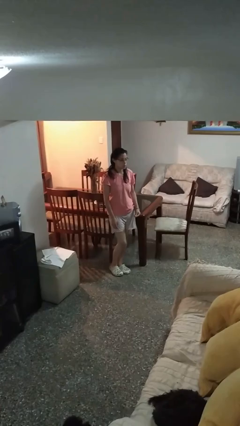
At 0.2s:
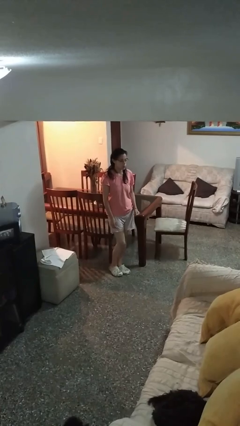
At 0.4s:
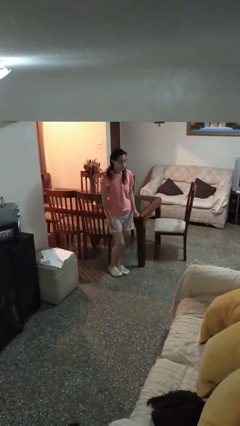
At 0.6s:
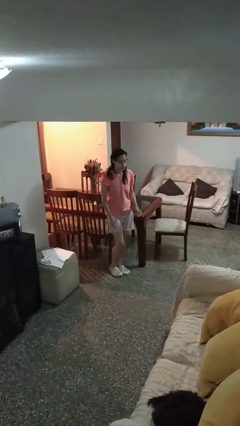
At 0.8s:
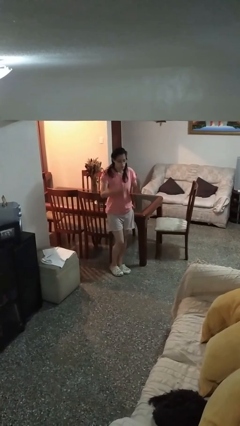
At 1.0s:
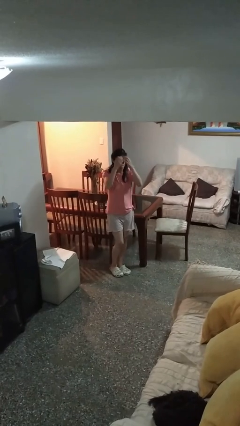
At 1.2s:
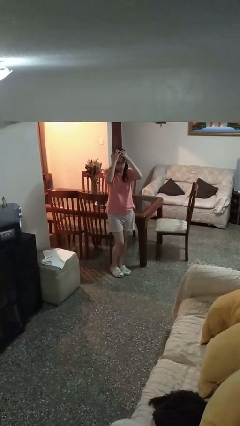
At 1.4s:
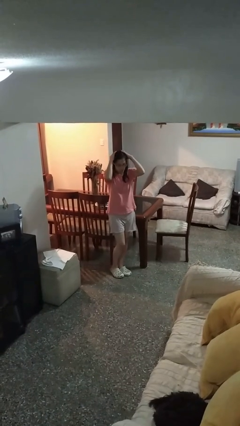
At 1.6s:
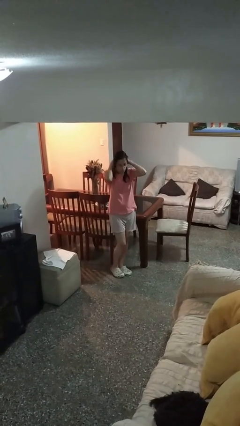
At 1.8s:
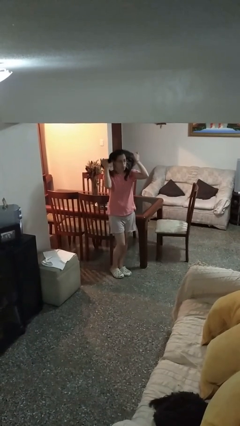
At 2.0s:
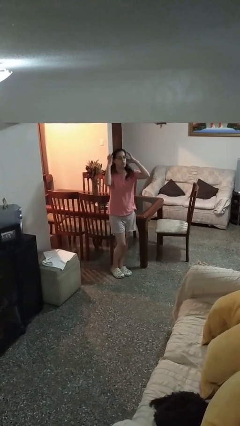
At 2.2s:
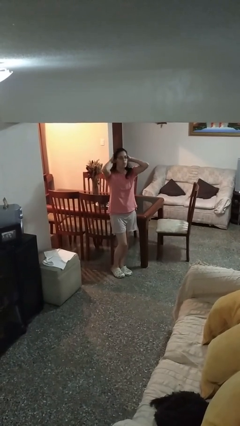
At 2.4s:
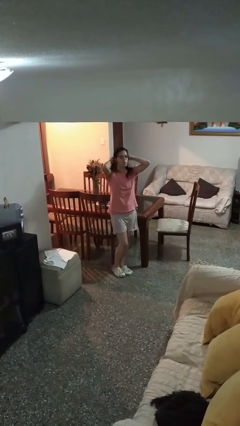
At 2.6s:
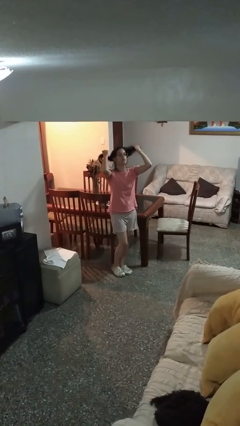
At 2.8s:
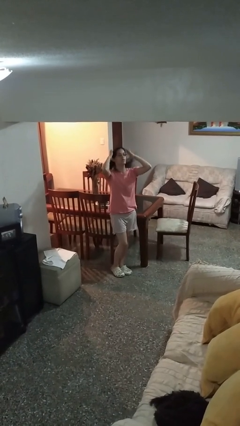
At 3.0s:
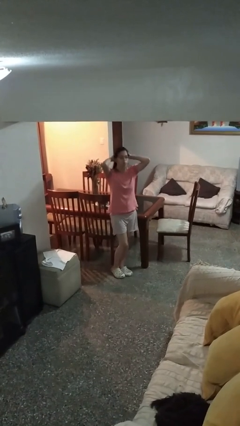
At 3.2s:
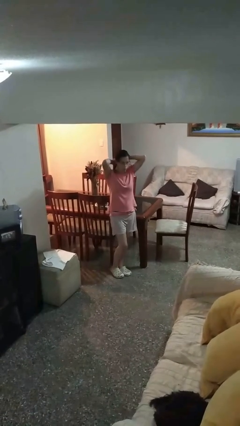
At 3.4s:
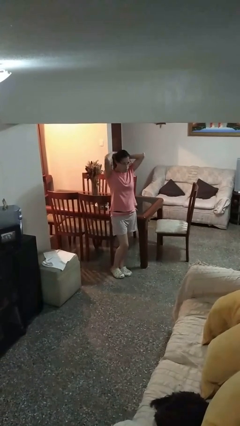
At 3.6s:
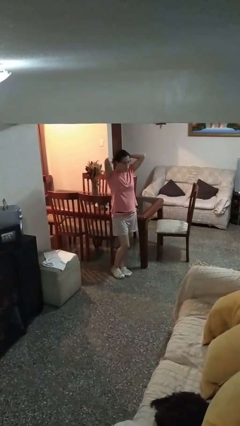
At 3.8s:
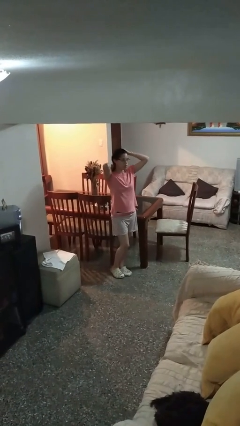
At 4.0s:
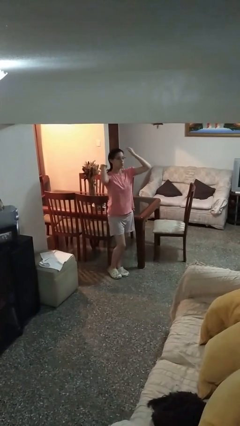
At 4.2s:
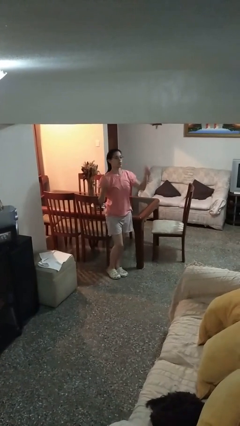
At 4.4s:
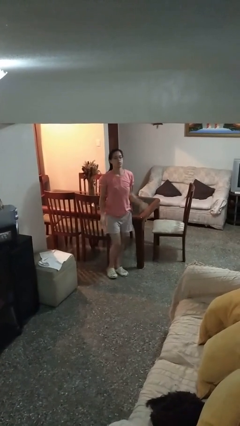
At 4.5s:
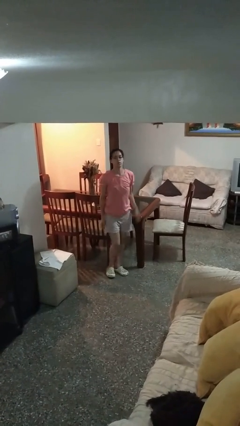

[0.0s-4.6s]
person strokes hair

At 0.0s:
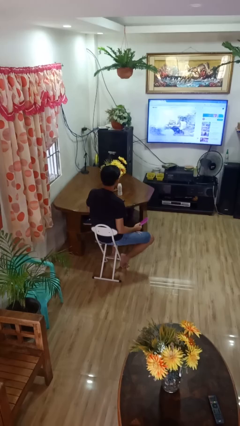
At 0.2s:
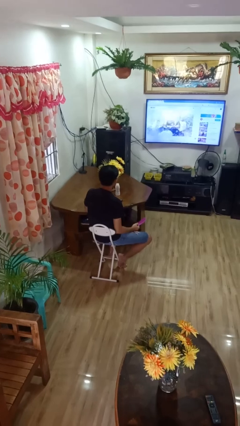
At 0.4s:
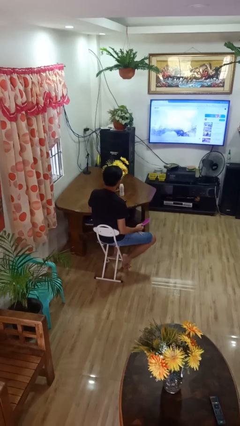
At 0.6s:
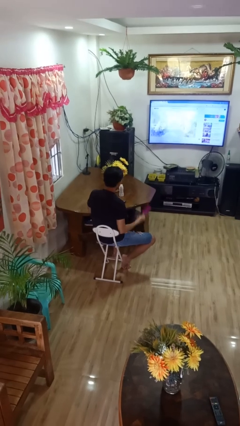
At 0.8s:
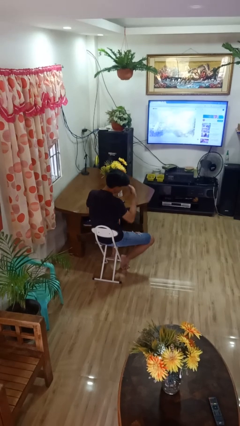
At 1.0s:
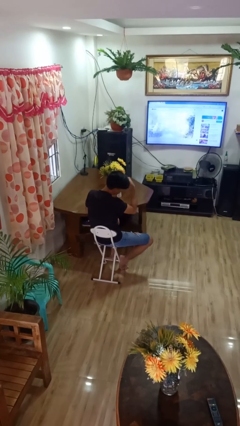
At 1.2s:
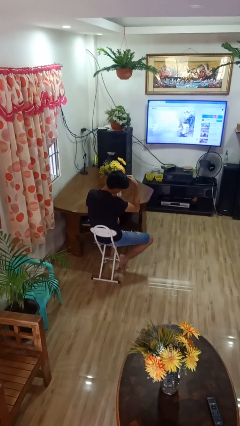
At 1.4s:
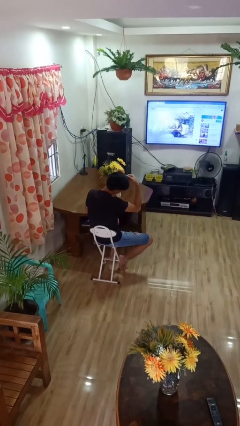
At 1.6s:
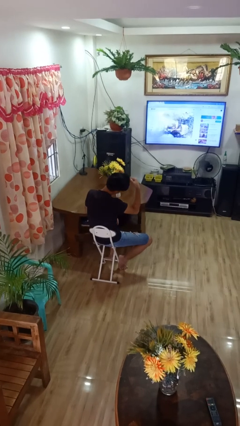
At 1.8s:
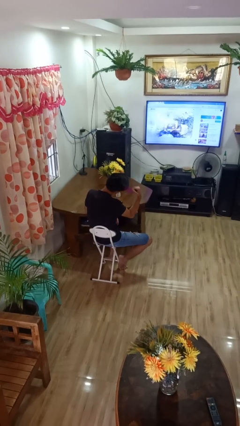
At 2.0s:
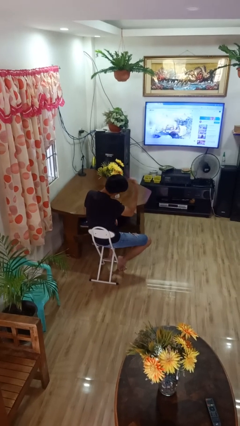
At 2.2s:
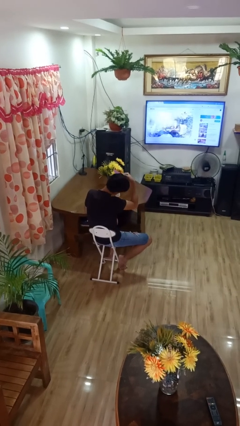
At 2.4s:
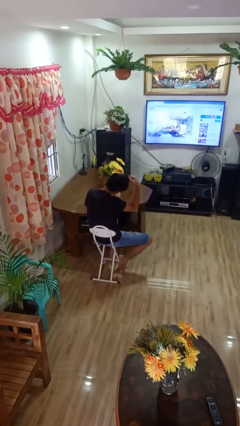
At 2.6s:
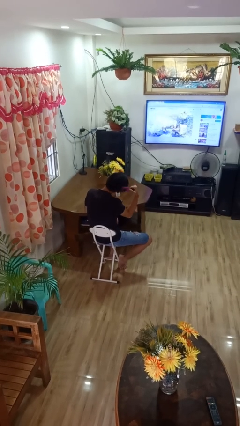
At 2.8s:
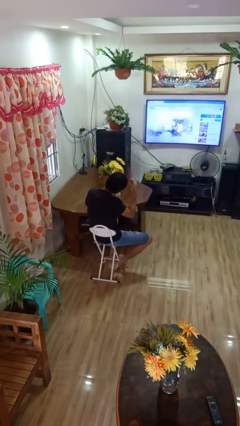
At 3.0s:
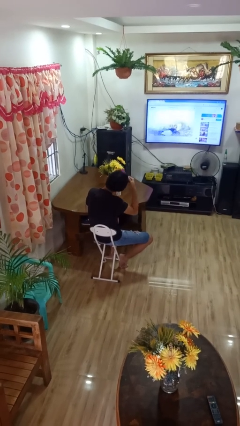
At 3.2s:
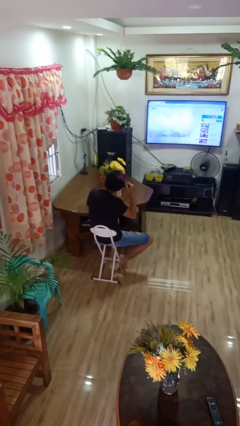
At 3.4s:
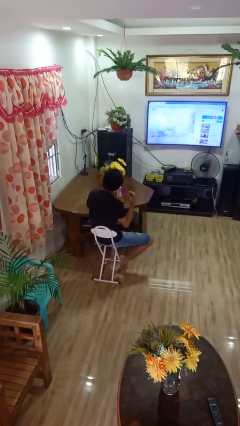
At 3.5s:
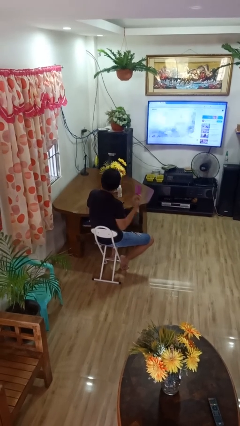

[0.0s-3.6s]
person brushes hair

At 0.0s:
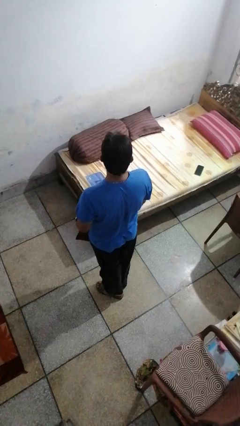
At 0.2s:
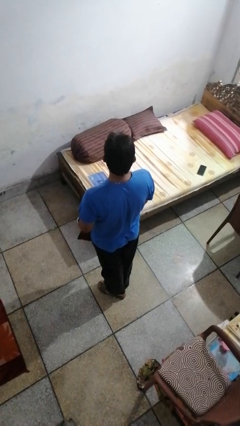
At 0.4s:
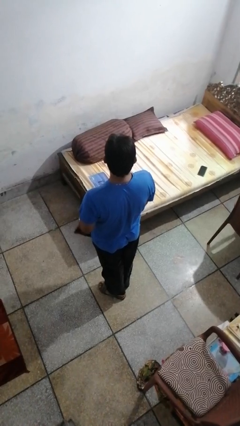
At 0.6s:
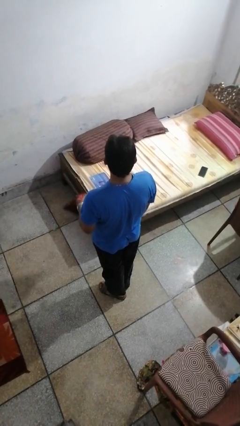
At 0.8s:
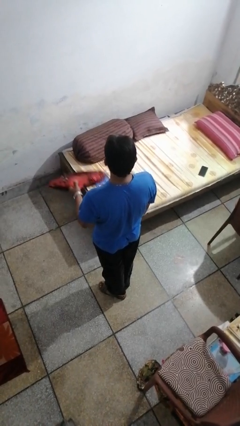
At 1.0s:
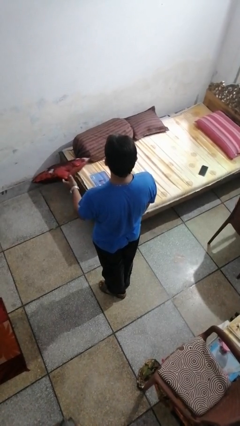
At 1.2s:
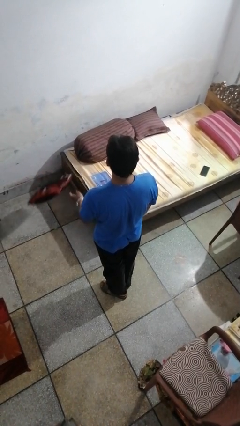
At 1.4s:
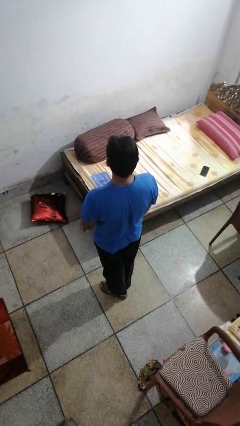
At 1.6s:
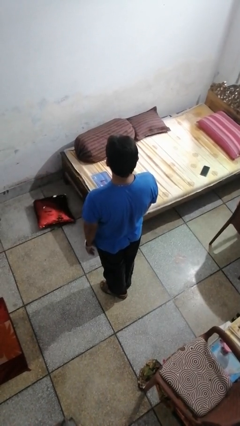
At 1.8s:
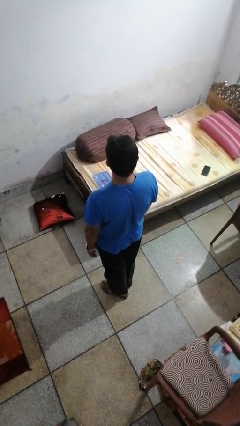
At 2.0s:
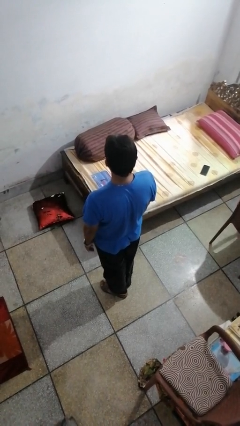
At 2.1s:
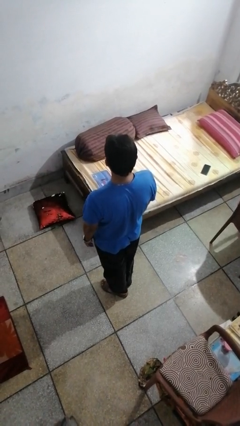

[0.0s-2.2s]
person throws object to ground

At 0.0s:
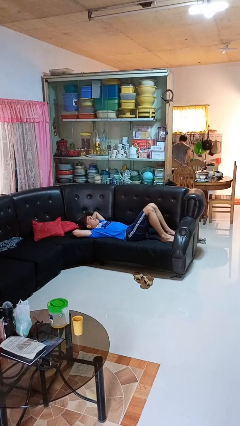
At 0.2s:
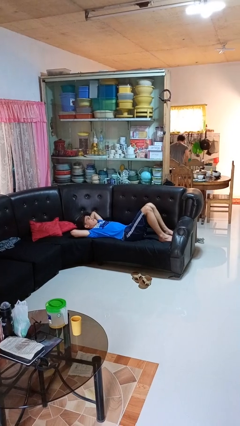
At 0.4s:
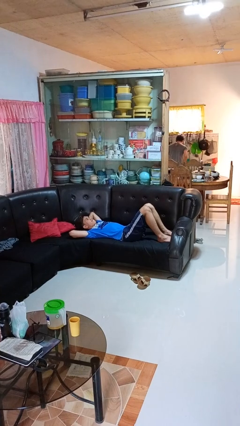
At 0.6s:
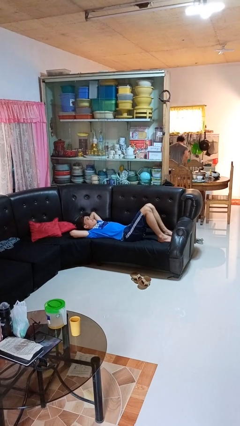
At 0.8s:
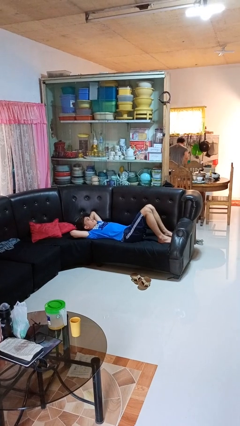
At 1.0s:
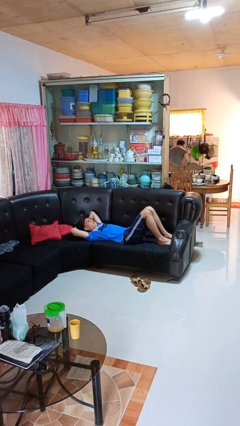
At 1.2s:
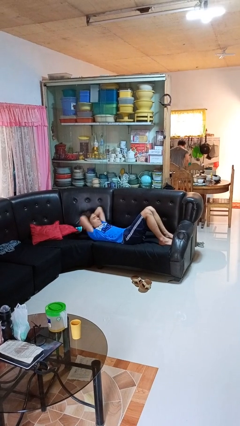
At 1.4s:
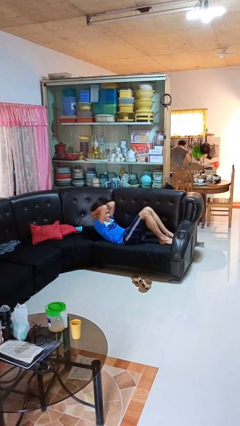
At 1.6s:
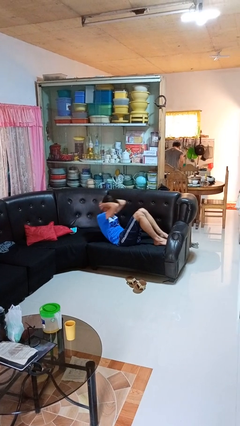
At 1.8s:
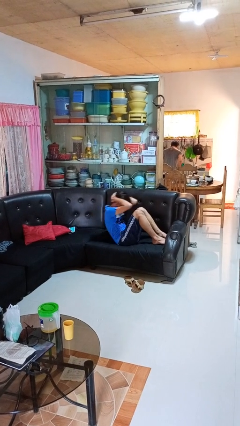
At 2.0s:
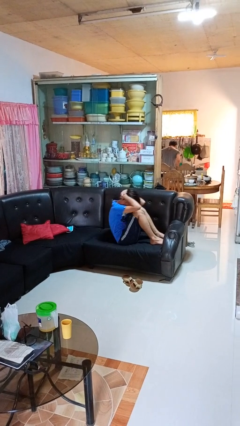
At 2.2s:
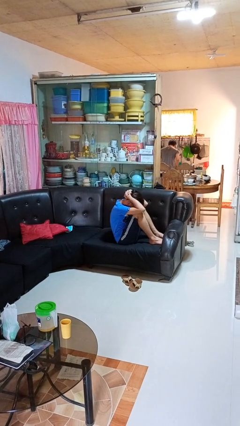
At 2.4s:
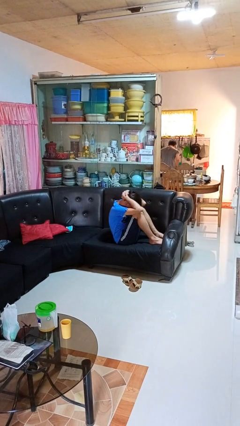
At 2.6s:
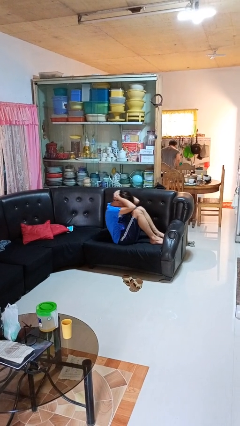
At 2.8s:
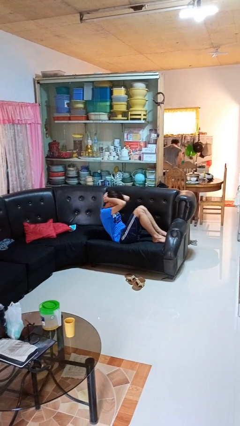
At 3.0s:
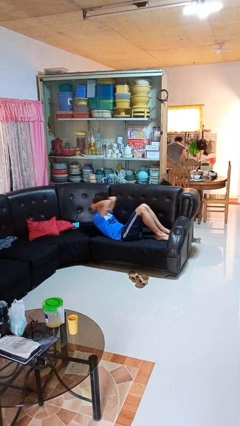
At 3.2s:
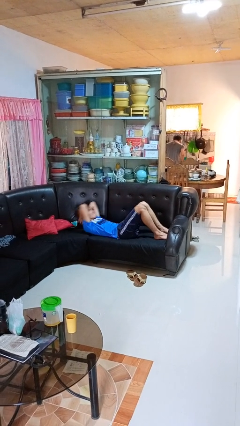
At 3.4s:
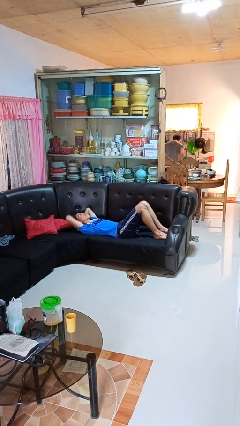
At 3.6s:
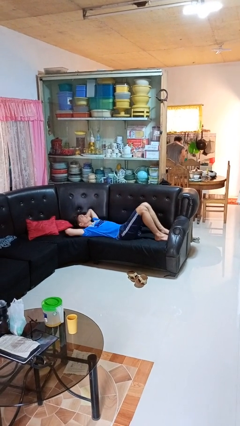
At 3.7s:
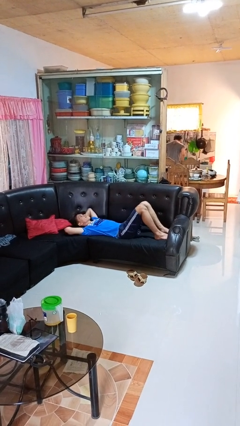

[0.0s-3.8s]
person exercises with situp

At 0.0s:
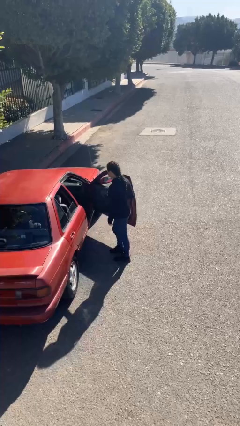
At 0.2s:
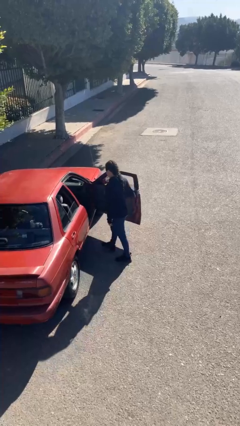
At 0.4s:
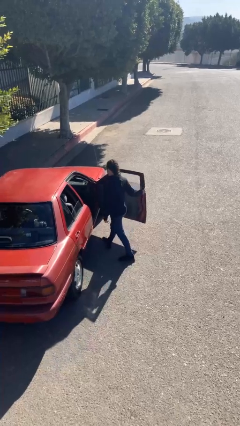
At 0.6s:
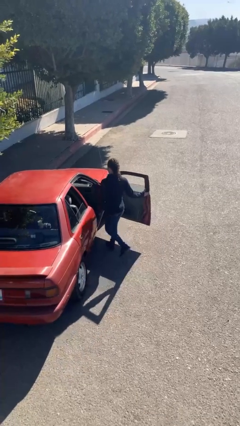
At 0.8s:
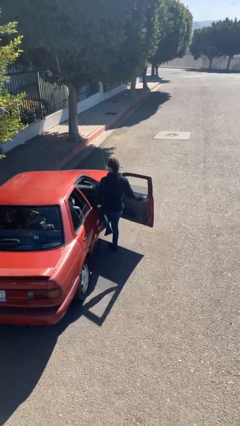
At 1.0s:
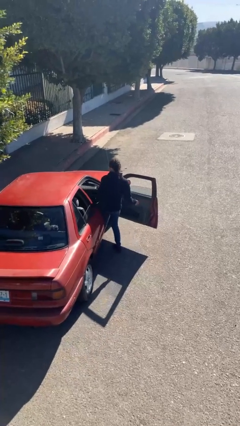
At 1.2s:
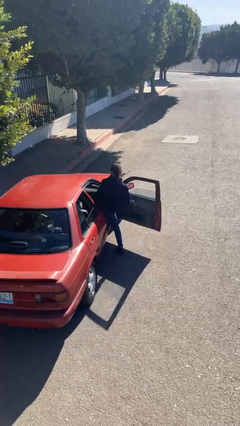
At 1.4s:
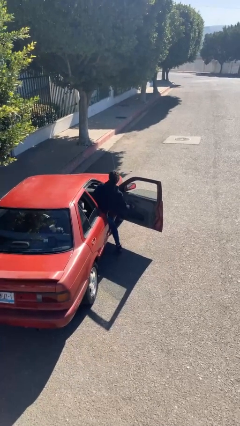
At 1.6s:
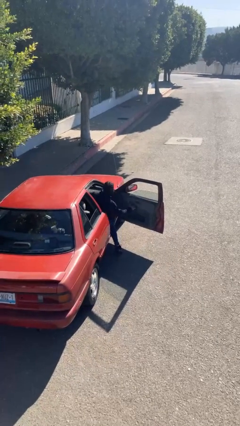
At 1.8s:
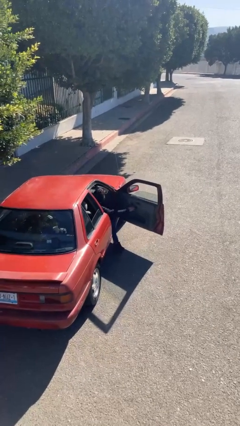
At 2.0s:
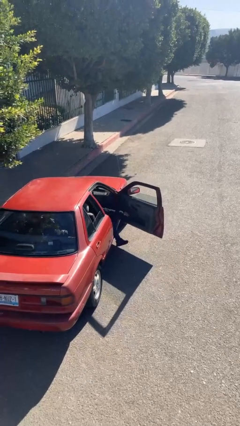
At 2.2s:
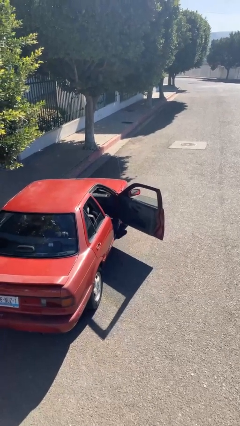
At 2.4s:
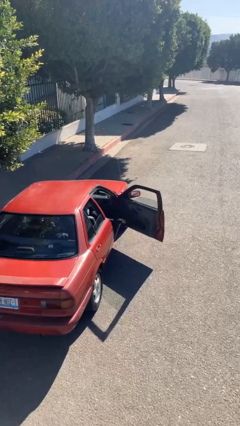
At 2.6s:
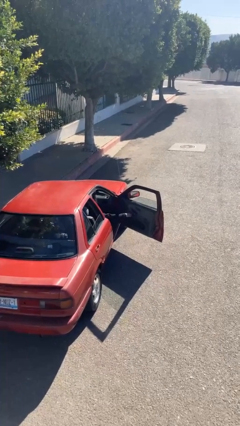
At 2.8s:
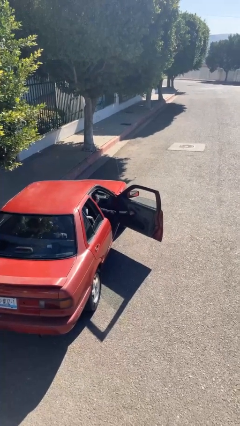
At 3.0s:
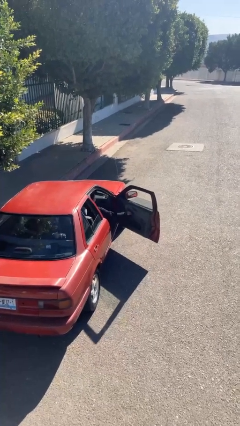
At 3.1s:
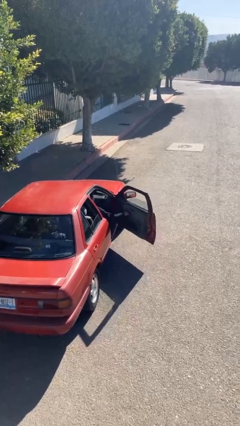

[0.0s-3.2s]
person enters car
